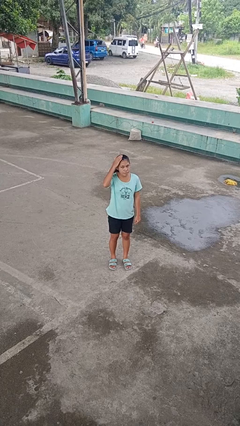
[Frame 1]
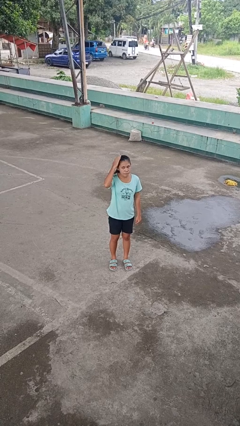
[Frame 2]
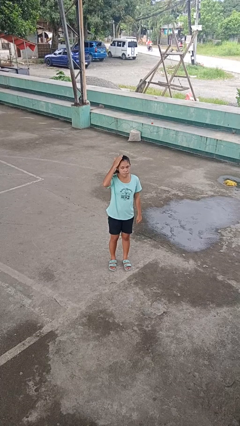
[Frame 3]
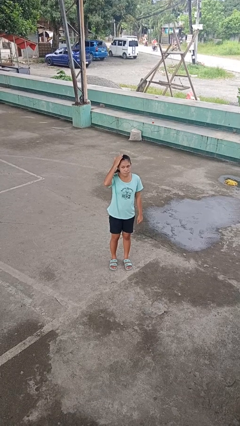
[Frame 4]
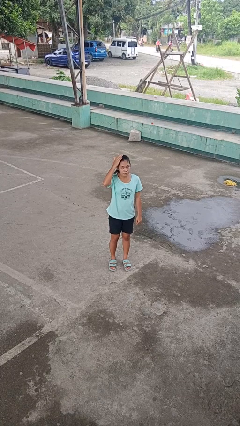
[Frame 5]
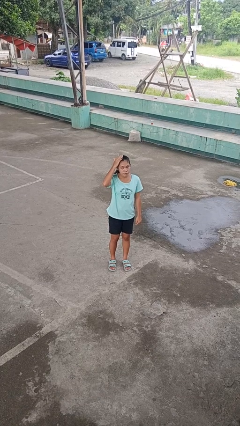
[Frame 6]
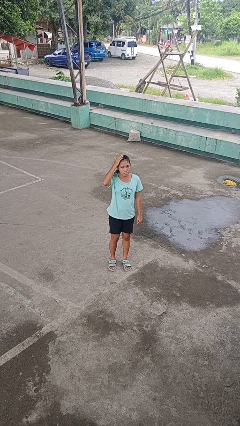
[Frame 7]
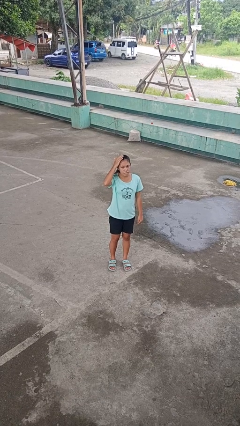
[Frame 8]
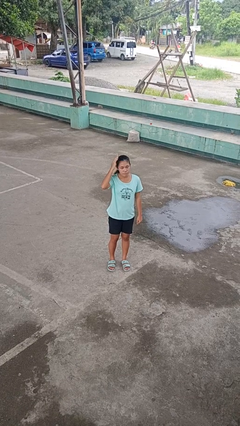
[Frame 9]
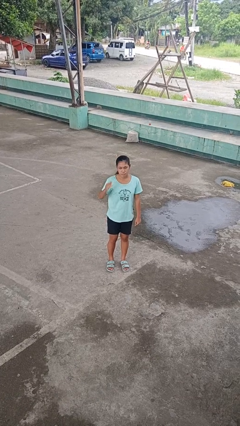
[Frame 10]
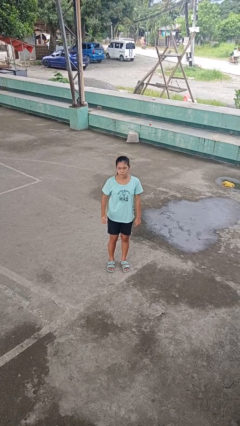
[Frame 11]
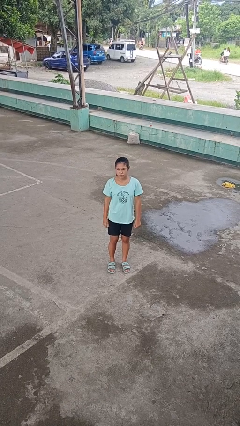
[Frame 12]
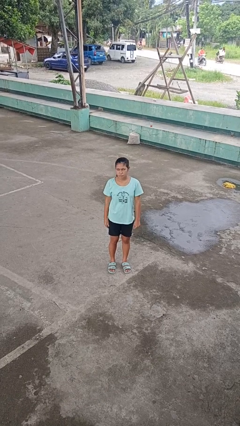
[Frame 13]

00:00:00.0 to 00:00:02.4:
person pats head

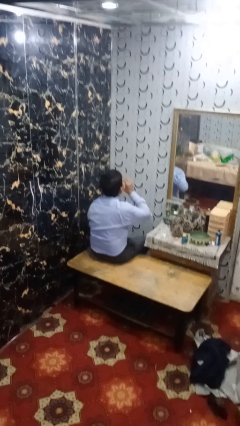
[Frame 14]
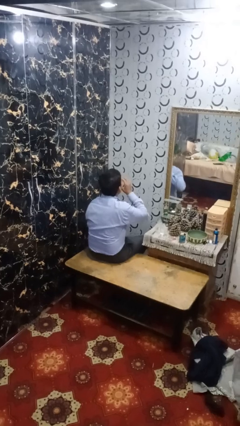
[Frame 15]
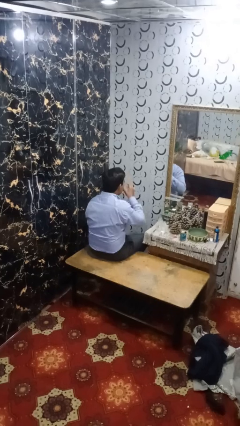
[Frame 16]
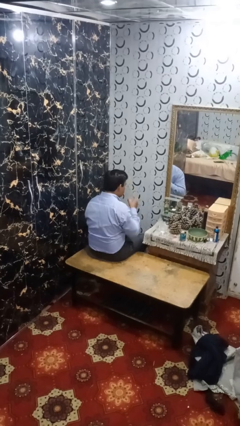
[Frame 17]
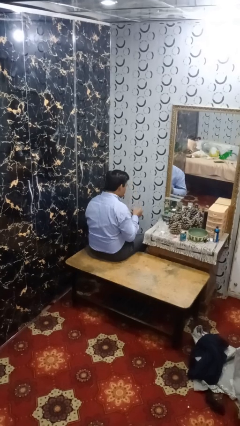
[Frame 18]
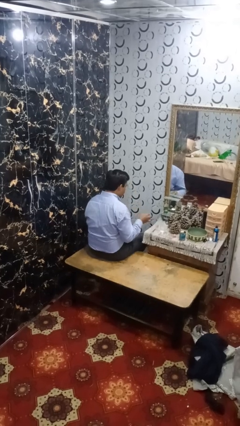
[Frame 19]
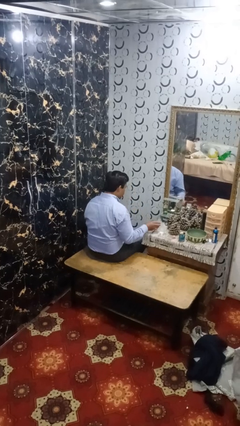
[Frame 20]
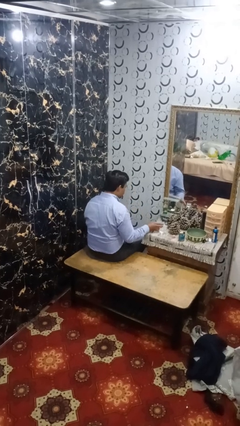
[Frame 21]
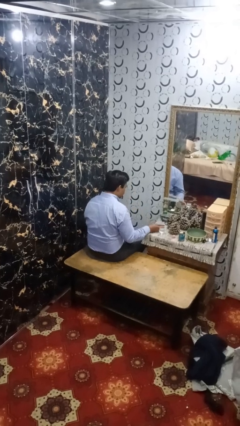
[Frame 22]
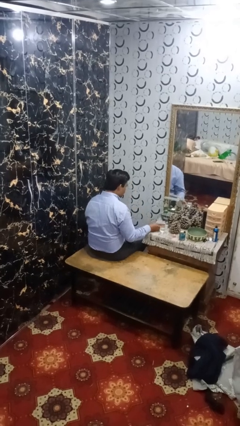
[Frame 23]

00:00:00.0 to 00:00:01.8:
person puts down object on table

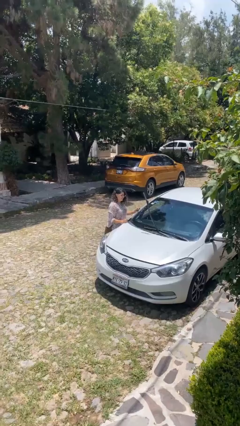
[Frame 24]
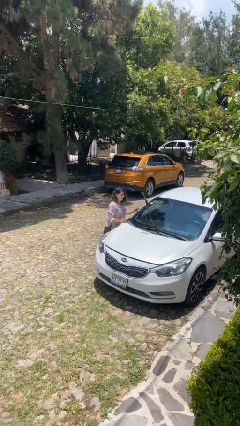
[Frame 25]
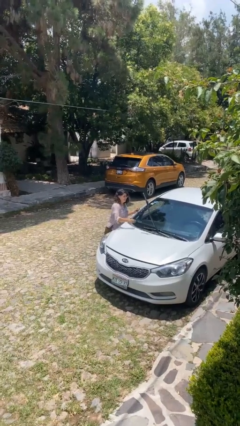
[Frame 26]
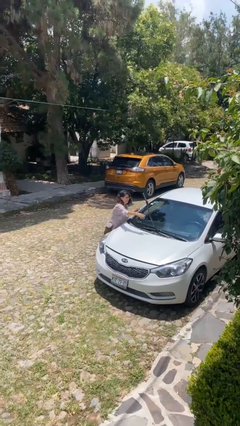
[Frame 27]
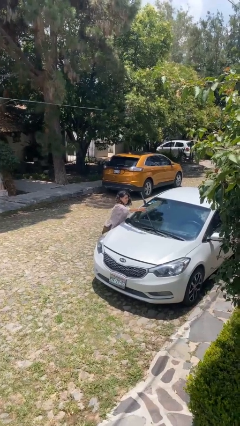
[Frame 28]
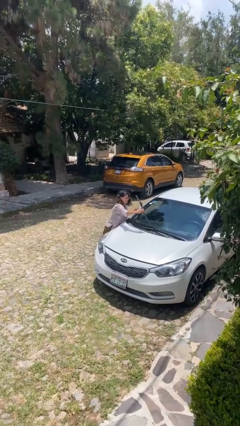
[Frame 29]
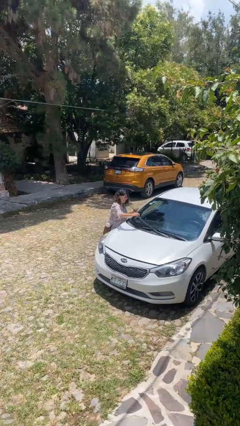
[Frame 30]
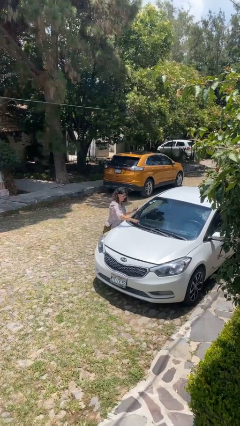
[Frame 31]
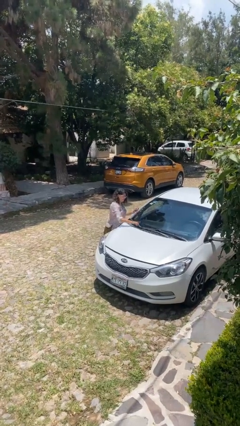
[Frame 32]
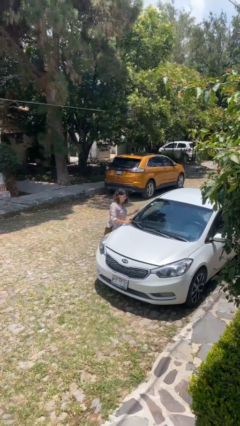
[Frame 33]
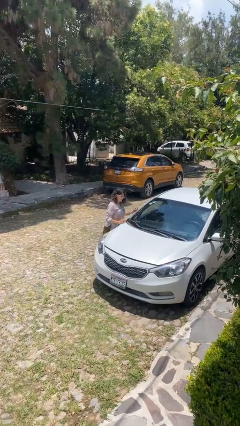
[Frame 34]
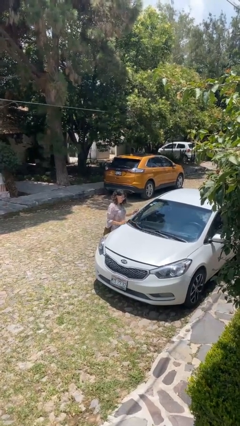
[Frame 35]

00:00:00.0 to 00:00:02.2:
person flips down car wipers

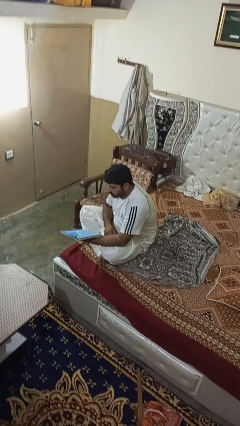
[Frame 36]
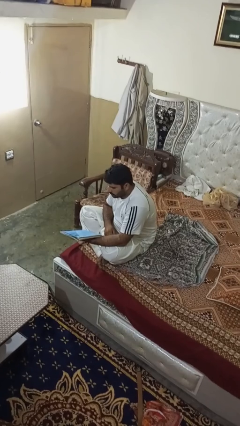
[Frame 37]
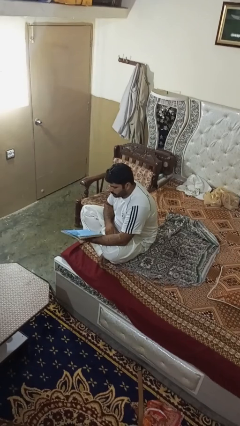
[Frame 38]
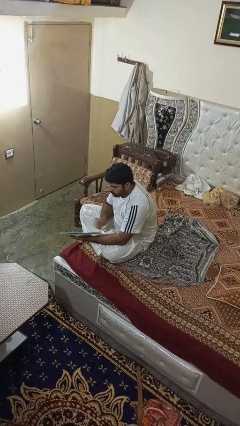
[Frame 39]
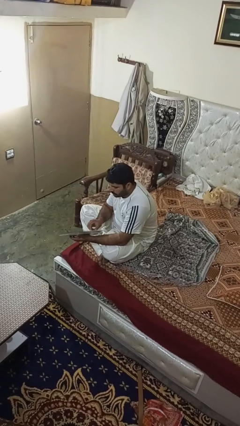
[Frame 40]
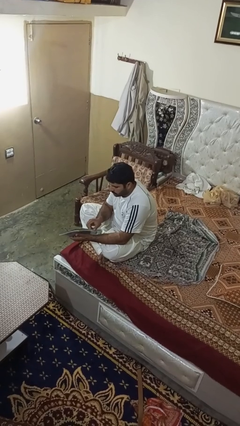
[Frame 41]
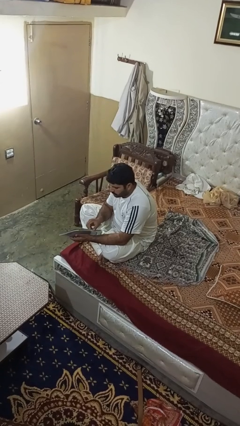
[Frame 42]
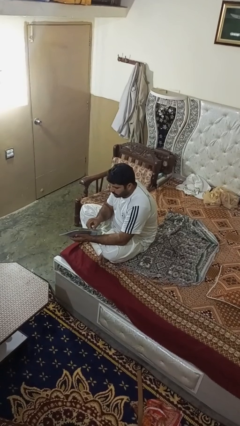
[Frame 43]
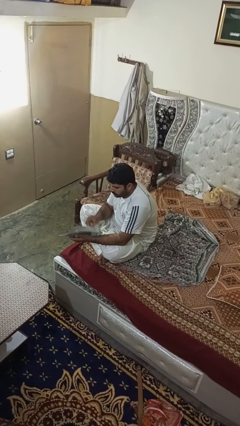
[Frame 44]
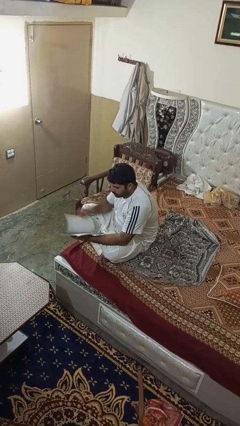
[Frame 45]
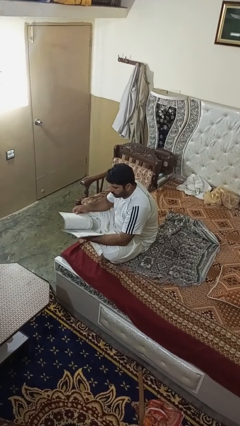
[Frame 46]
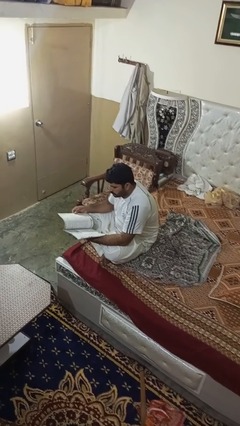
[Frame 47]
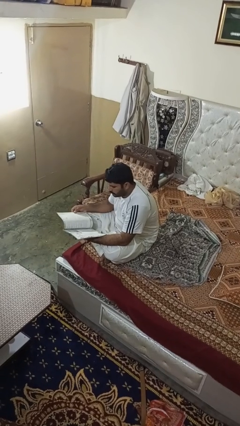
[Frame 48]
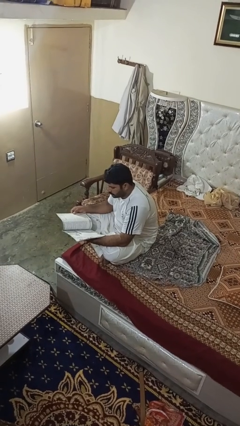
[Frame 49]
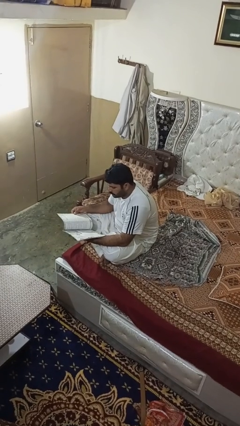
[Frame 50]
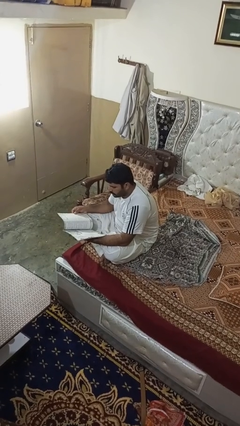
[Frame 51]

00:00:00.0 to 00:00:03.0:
person reads magazine

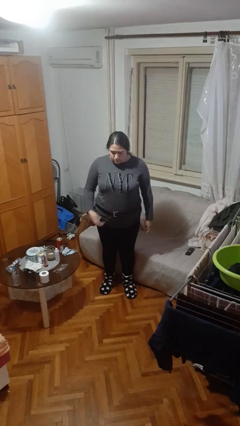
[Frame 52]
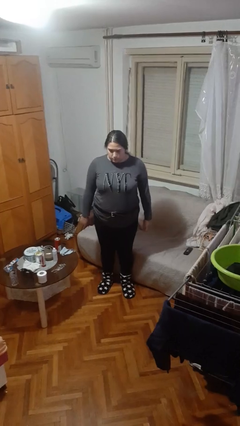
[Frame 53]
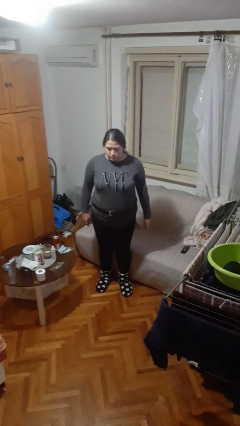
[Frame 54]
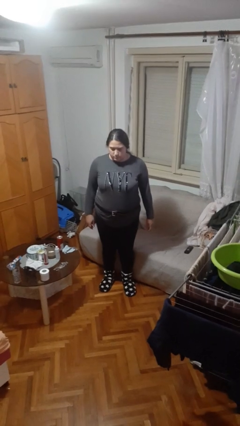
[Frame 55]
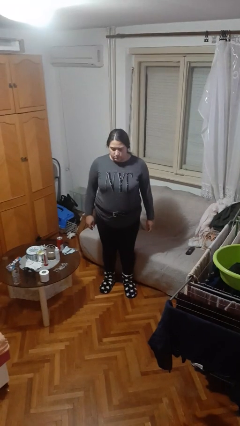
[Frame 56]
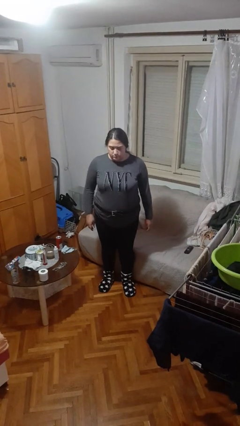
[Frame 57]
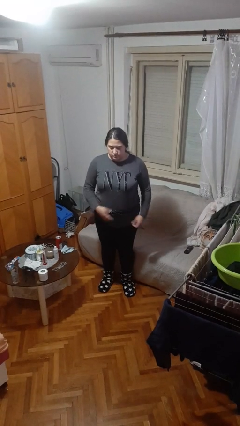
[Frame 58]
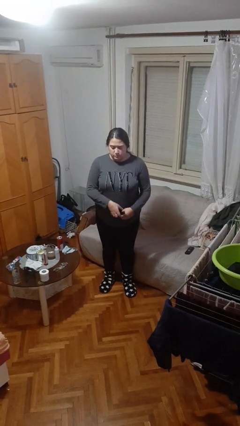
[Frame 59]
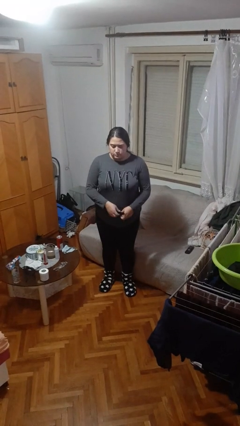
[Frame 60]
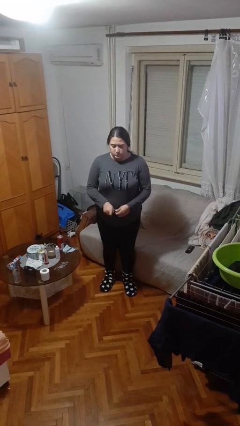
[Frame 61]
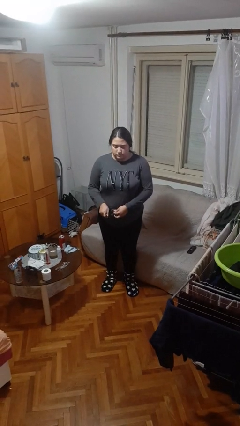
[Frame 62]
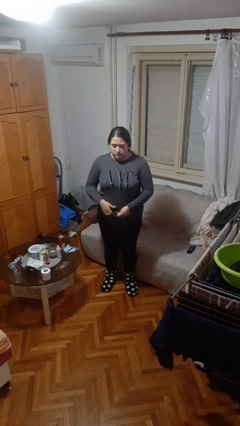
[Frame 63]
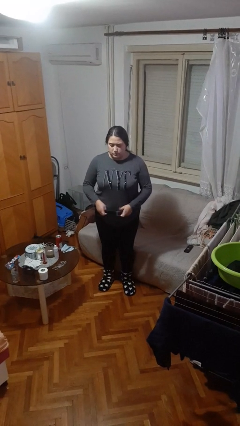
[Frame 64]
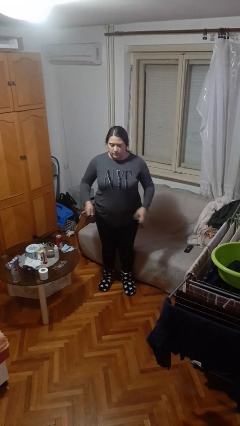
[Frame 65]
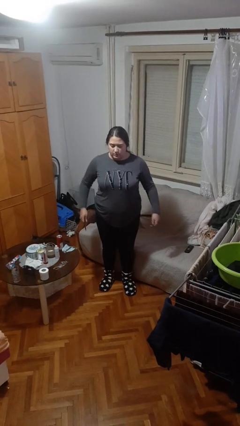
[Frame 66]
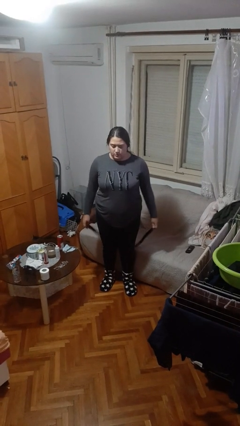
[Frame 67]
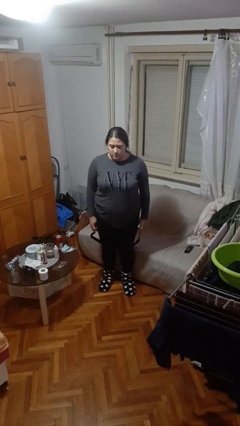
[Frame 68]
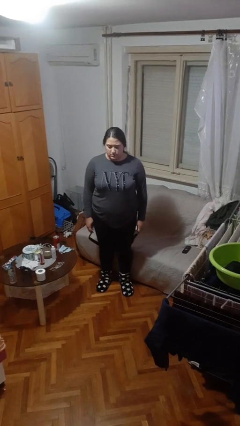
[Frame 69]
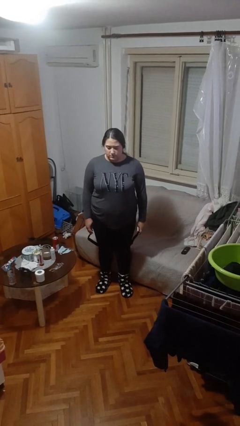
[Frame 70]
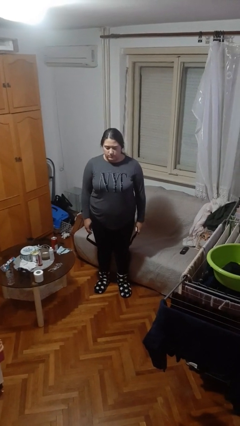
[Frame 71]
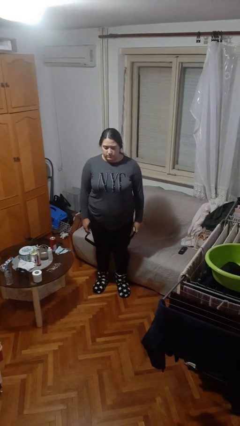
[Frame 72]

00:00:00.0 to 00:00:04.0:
person takes off belt

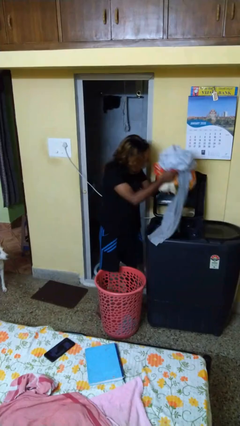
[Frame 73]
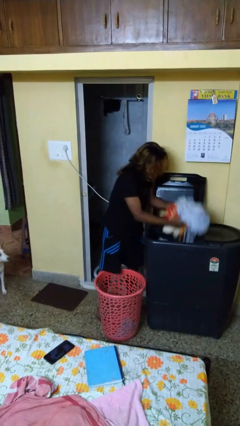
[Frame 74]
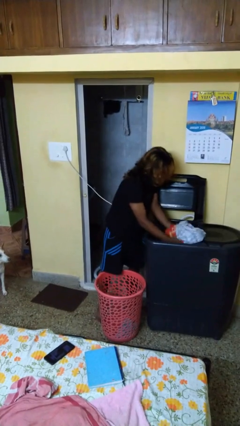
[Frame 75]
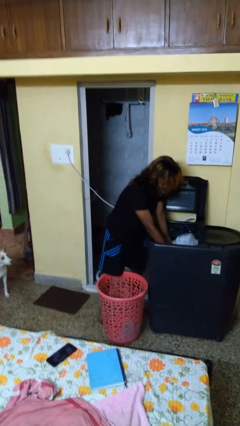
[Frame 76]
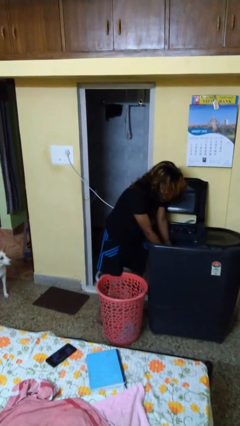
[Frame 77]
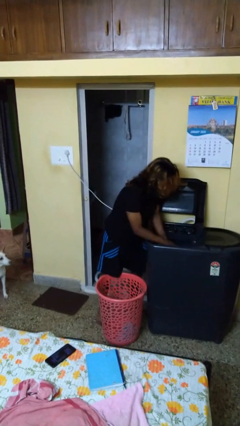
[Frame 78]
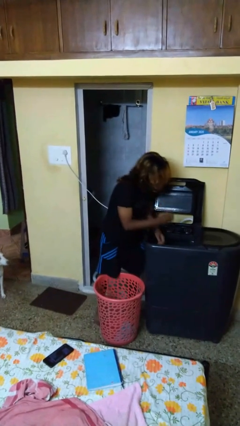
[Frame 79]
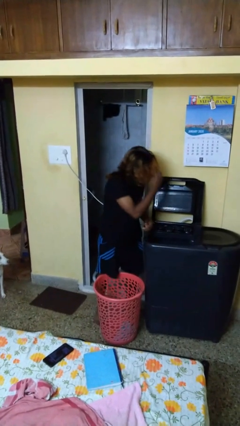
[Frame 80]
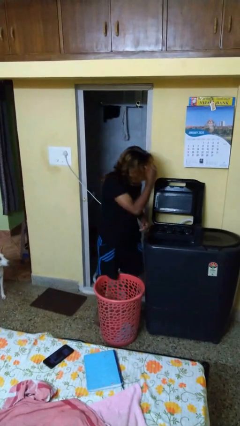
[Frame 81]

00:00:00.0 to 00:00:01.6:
person loads clotheswasher

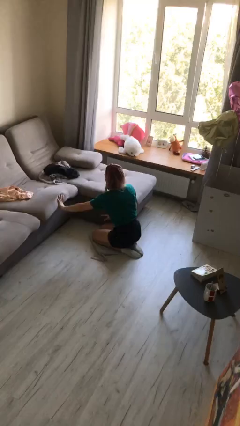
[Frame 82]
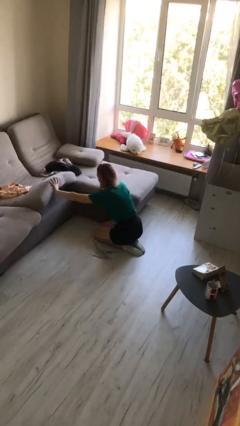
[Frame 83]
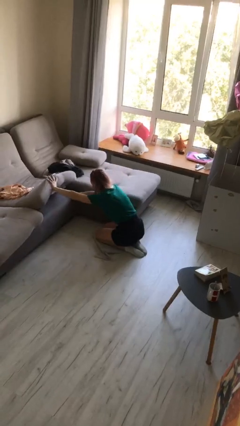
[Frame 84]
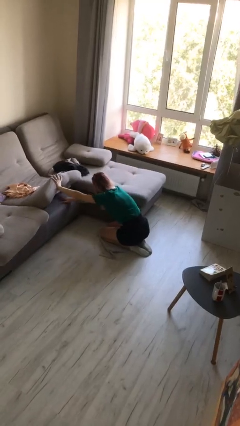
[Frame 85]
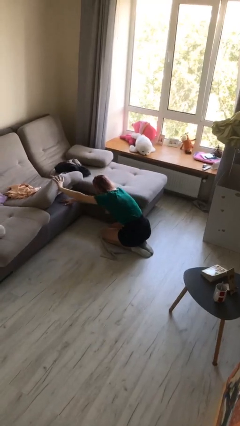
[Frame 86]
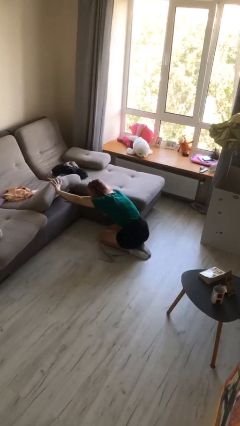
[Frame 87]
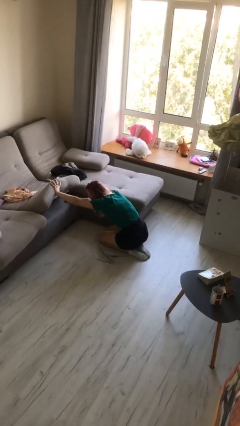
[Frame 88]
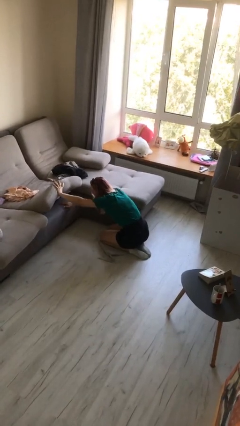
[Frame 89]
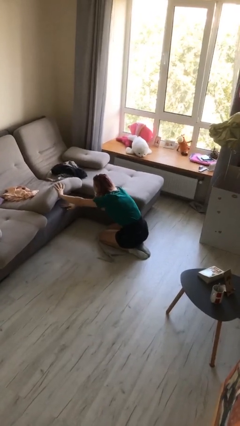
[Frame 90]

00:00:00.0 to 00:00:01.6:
person searches under couch
